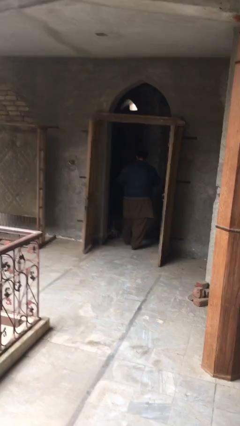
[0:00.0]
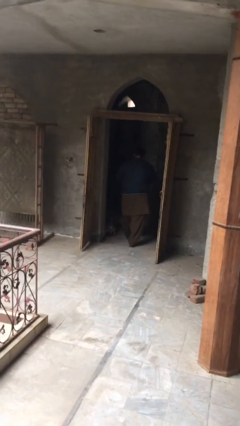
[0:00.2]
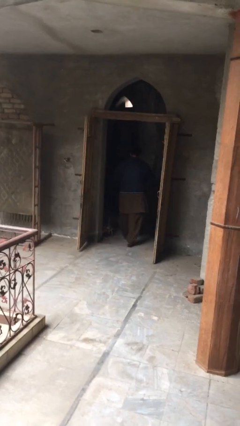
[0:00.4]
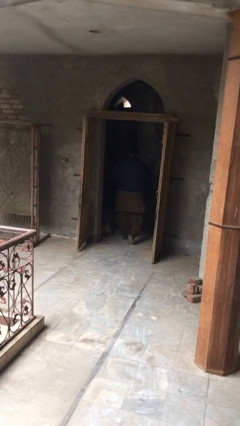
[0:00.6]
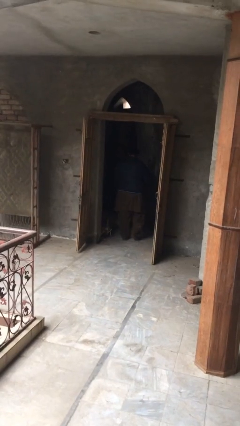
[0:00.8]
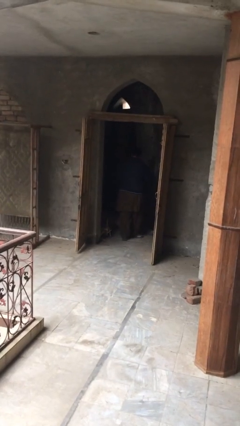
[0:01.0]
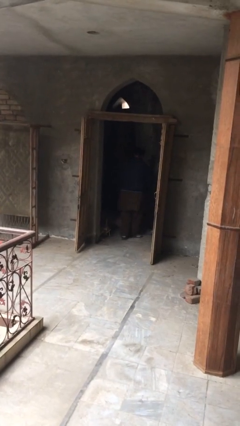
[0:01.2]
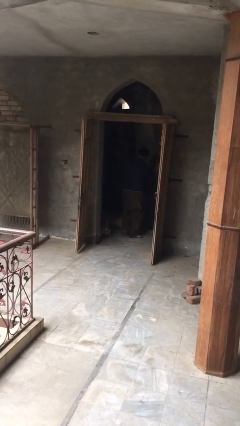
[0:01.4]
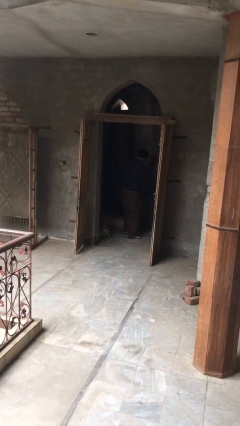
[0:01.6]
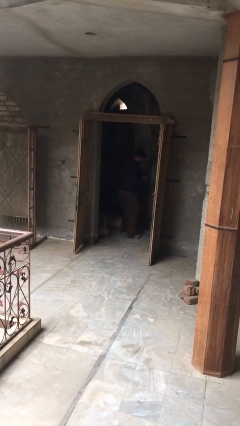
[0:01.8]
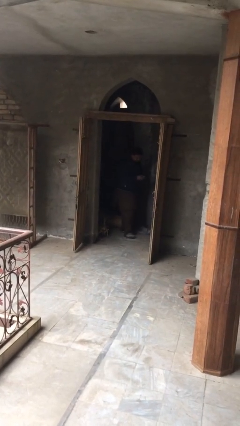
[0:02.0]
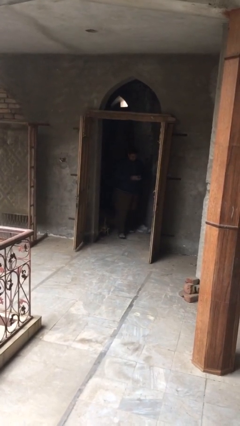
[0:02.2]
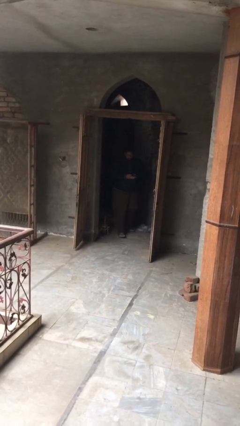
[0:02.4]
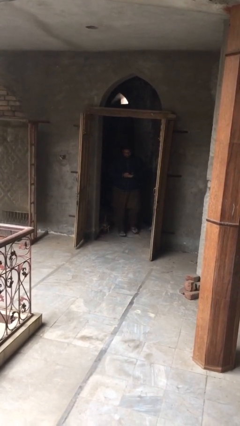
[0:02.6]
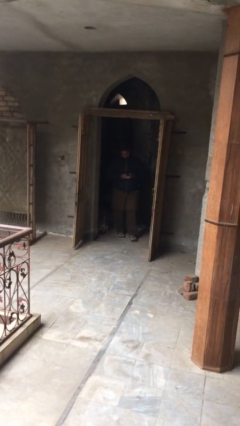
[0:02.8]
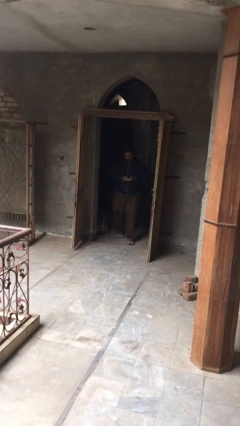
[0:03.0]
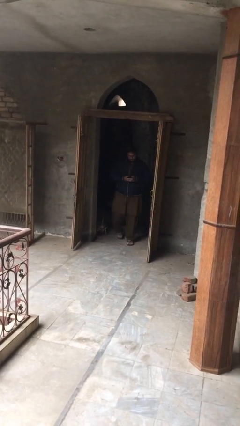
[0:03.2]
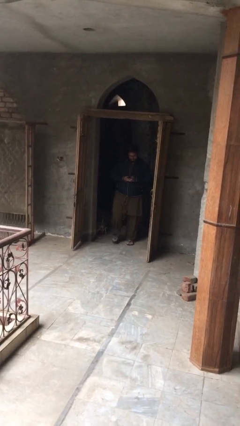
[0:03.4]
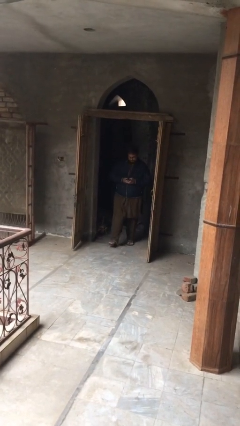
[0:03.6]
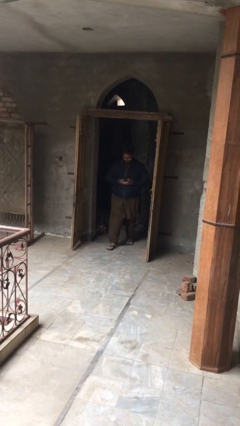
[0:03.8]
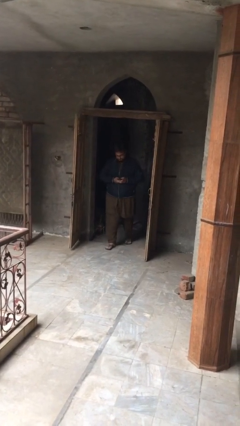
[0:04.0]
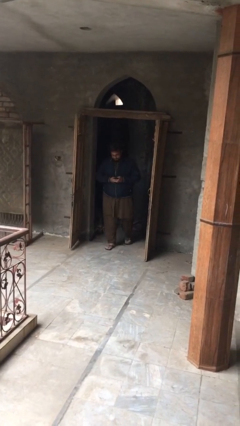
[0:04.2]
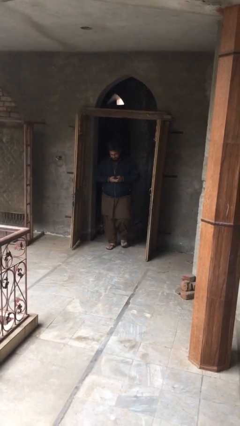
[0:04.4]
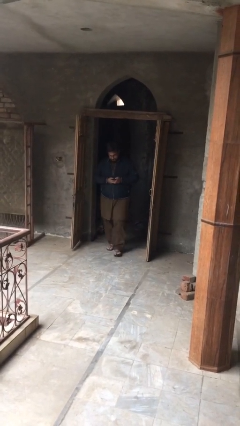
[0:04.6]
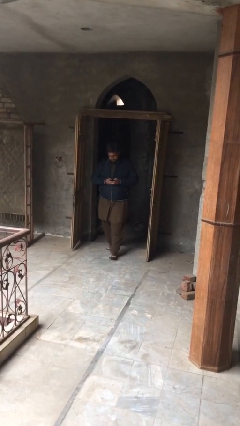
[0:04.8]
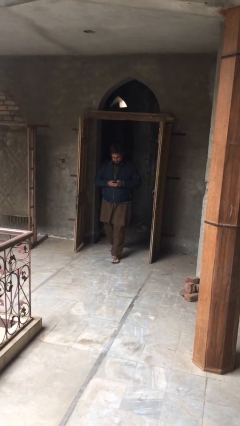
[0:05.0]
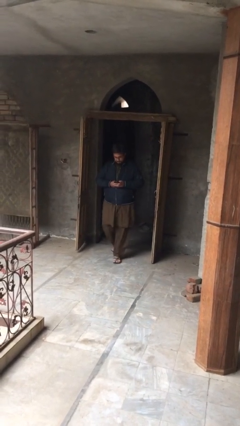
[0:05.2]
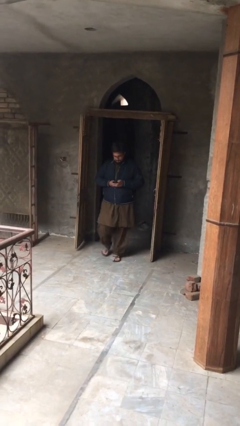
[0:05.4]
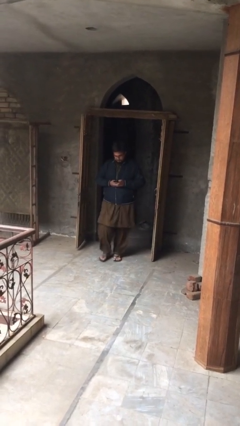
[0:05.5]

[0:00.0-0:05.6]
person enters scene through structure

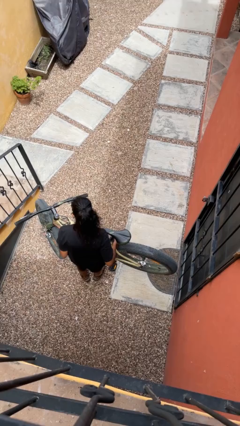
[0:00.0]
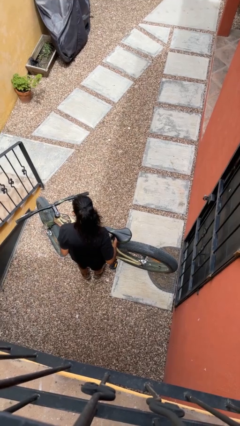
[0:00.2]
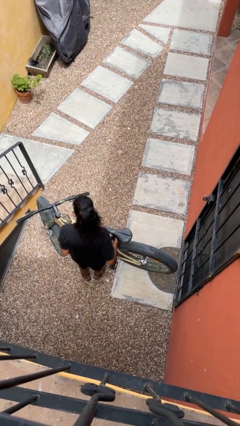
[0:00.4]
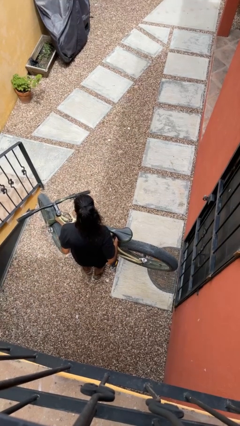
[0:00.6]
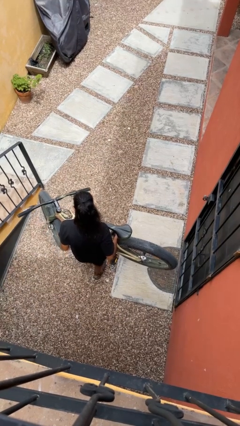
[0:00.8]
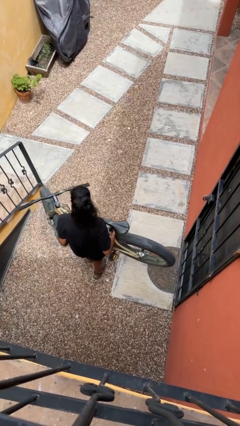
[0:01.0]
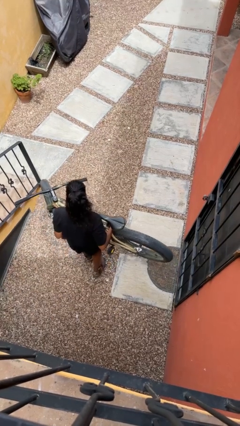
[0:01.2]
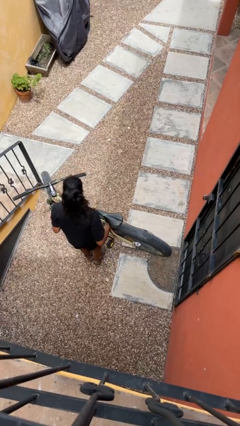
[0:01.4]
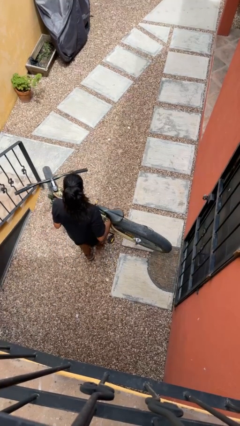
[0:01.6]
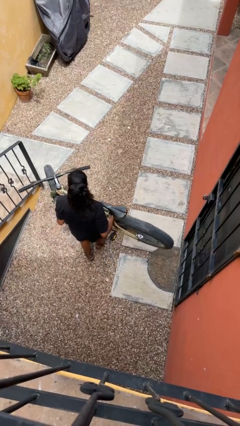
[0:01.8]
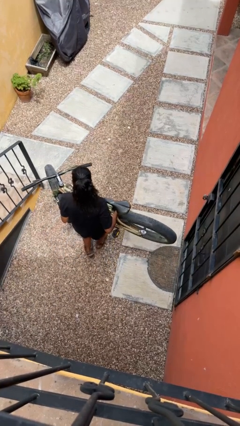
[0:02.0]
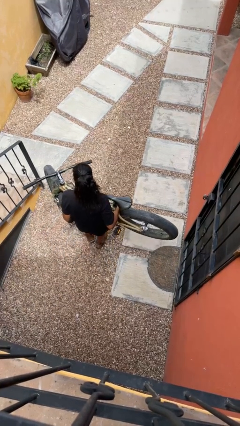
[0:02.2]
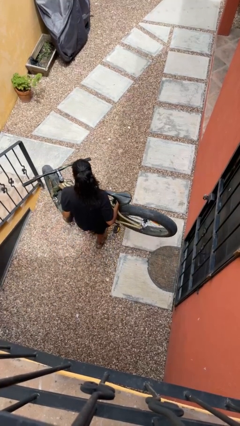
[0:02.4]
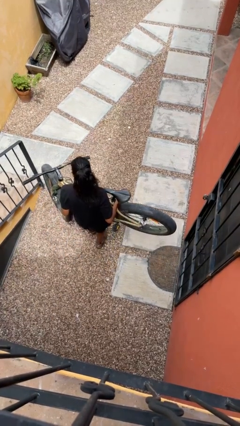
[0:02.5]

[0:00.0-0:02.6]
person carries bicycle

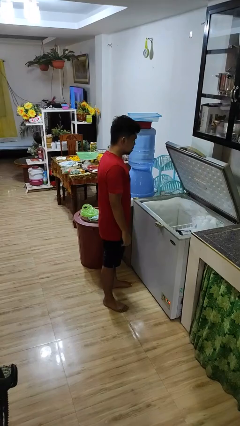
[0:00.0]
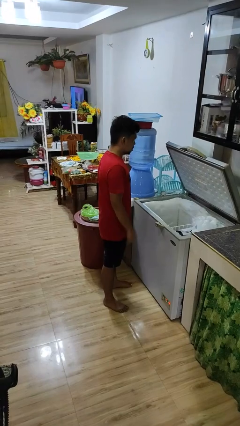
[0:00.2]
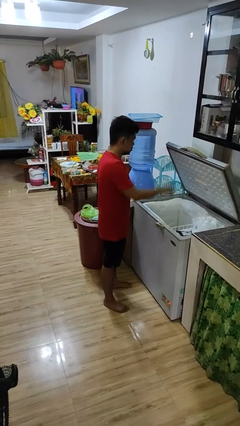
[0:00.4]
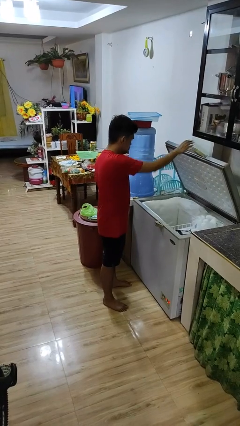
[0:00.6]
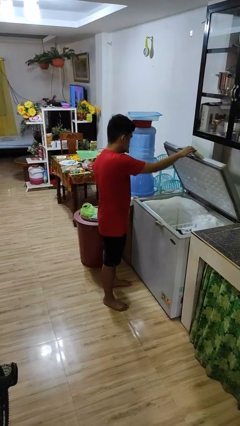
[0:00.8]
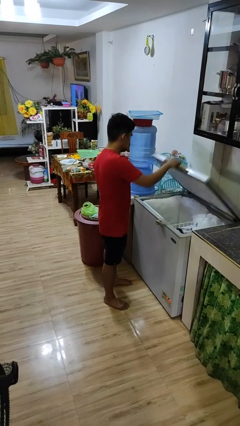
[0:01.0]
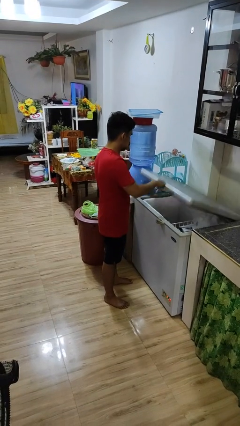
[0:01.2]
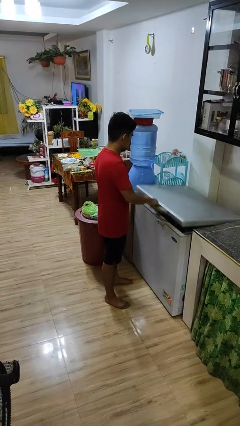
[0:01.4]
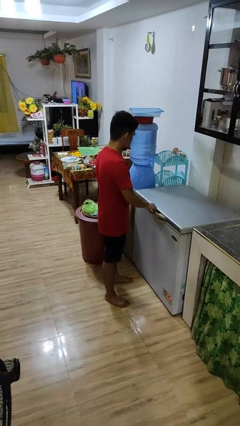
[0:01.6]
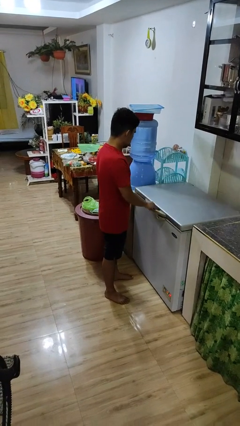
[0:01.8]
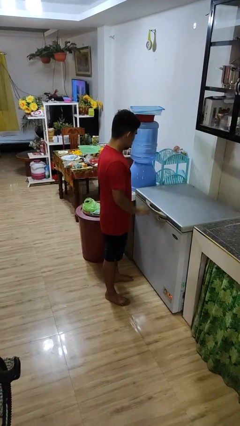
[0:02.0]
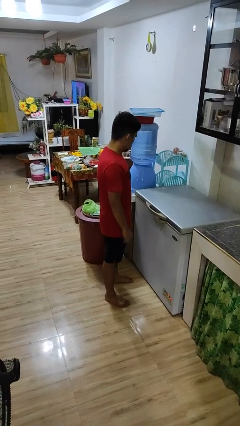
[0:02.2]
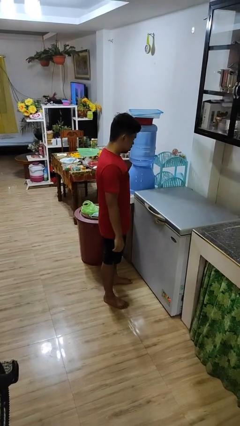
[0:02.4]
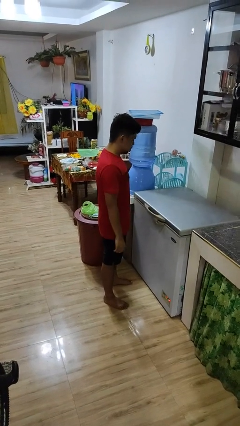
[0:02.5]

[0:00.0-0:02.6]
person closes refrigerator

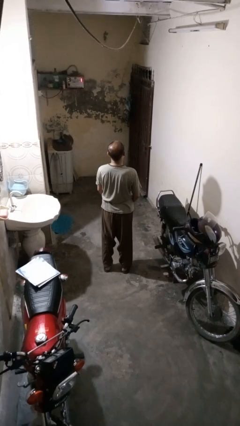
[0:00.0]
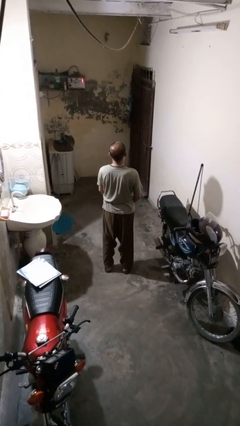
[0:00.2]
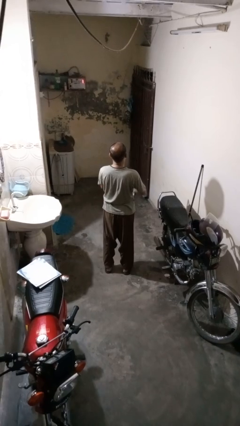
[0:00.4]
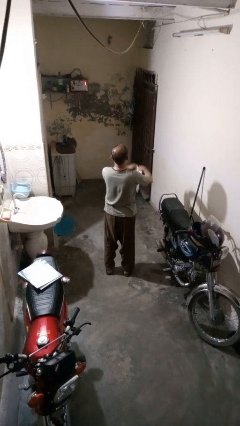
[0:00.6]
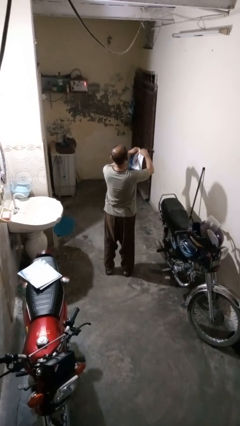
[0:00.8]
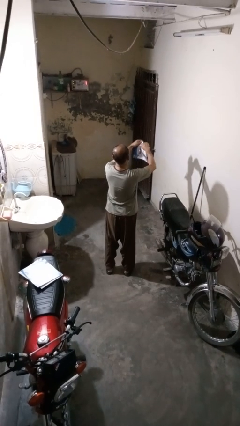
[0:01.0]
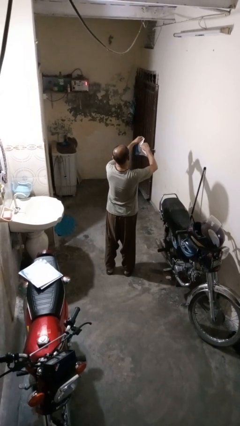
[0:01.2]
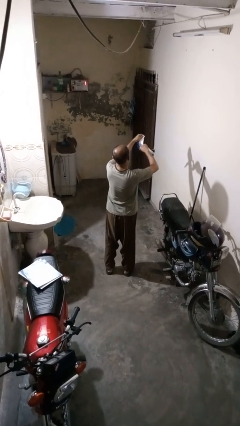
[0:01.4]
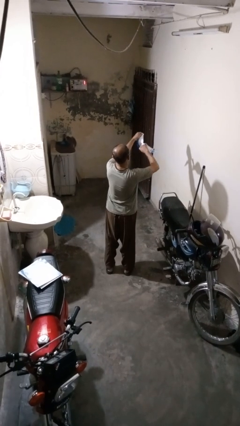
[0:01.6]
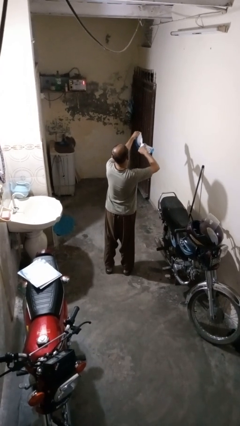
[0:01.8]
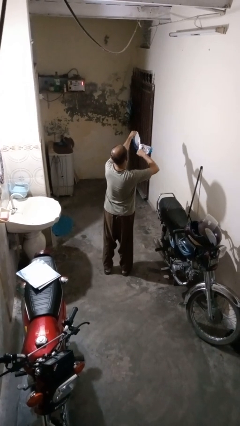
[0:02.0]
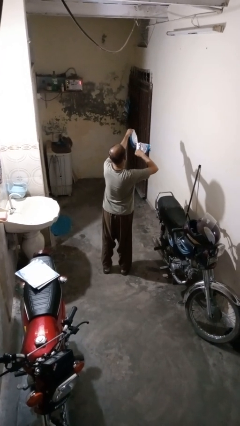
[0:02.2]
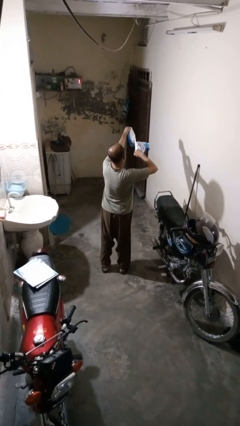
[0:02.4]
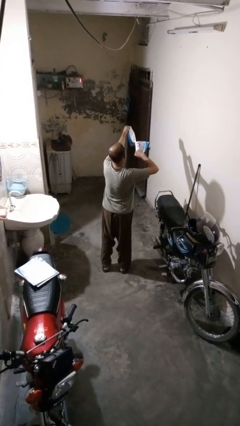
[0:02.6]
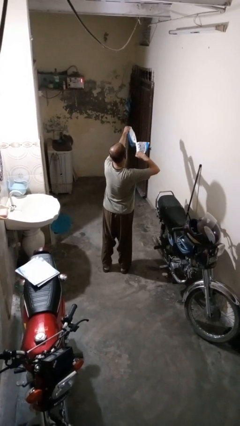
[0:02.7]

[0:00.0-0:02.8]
person tears paper

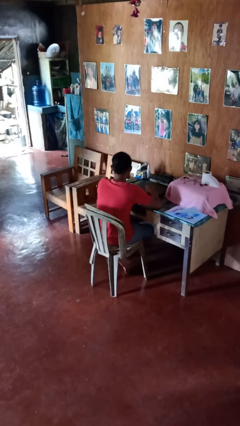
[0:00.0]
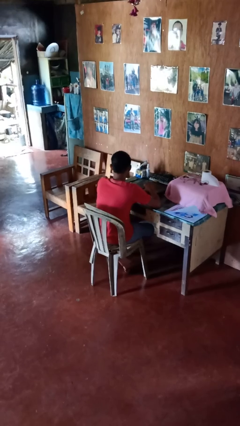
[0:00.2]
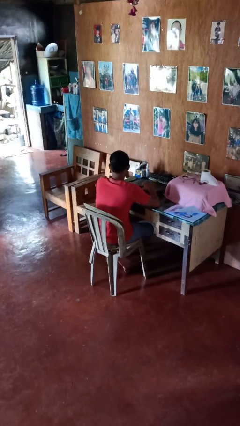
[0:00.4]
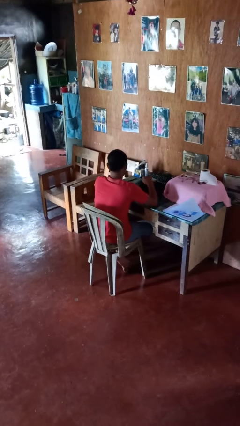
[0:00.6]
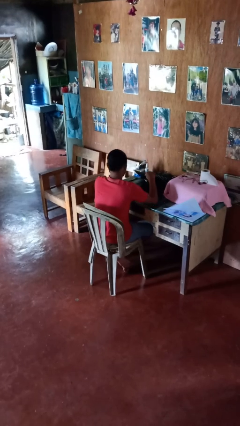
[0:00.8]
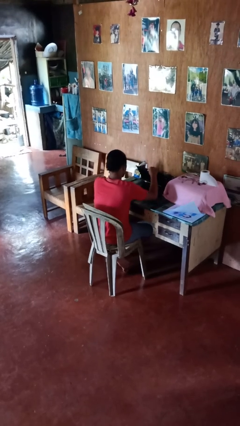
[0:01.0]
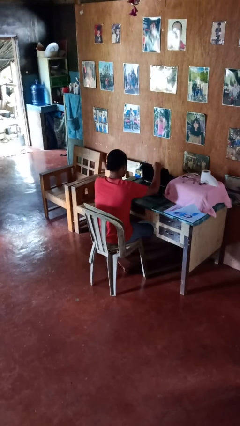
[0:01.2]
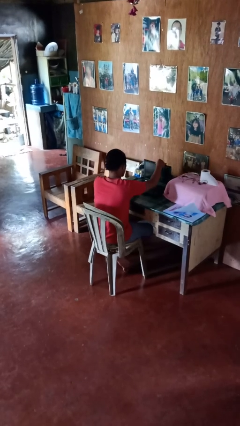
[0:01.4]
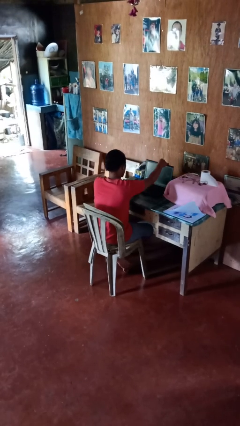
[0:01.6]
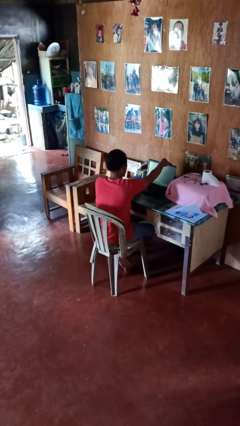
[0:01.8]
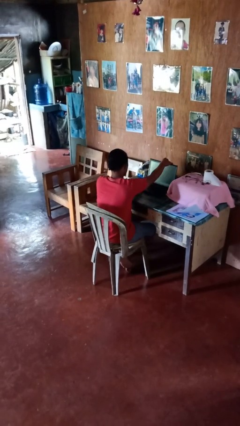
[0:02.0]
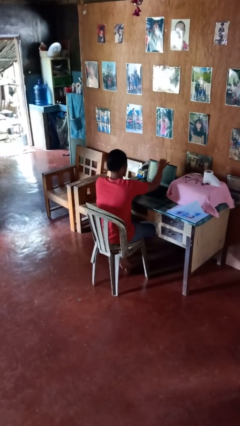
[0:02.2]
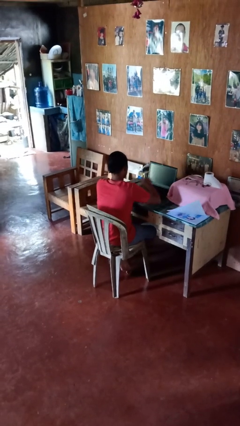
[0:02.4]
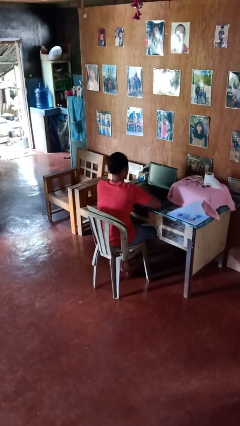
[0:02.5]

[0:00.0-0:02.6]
person opens laptop

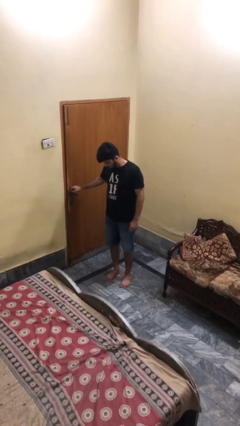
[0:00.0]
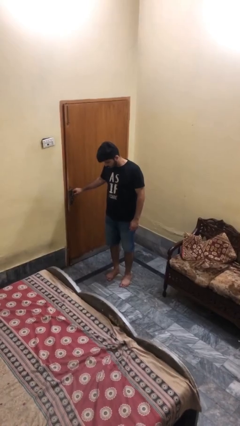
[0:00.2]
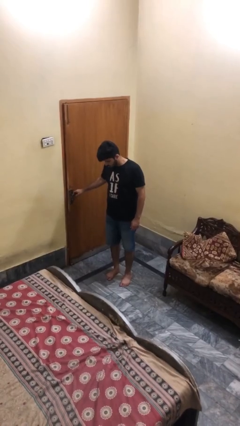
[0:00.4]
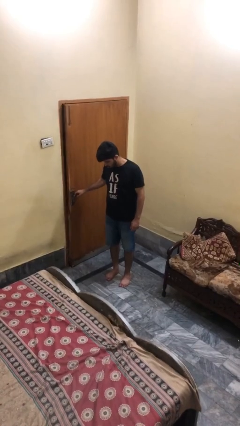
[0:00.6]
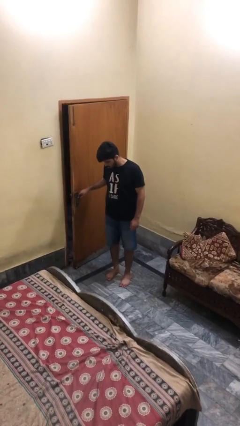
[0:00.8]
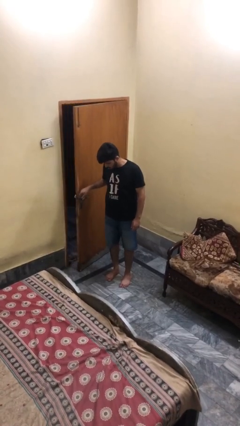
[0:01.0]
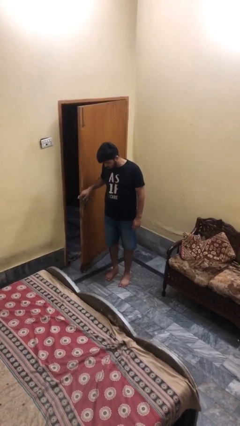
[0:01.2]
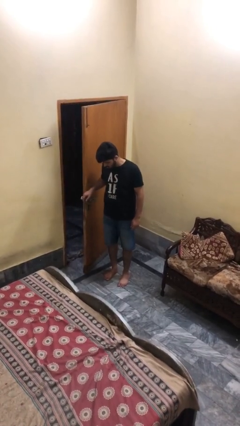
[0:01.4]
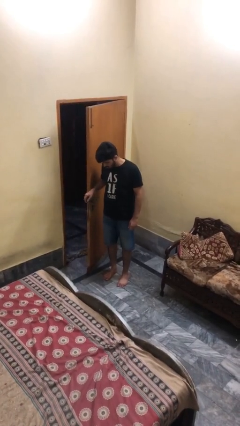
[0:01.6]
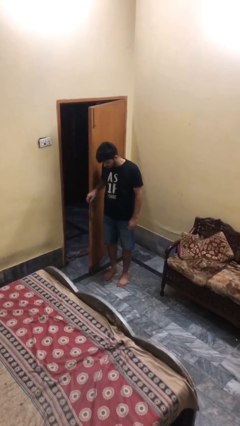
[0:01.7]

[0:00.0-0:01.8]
person opens facility door
